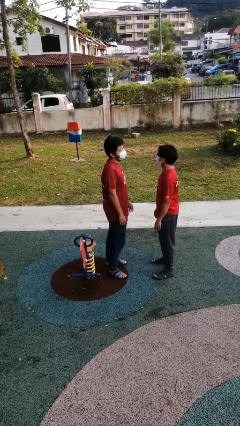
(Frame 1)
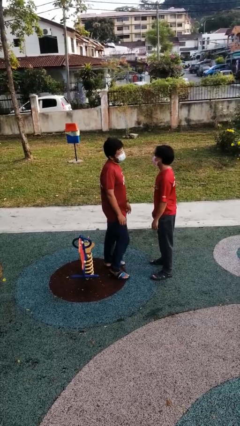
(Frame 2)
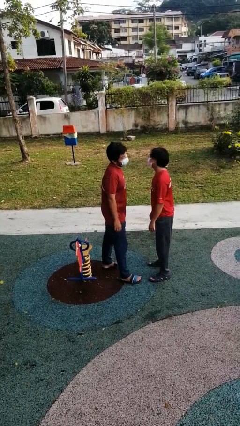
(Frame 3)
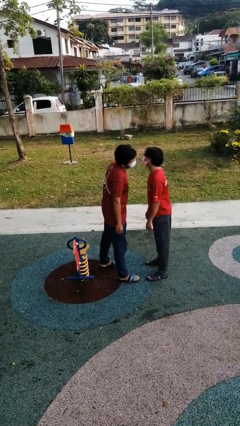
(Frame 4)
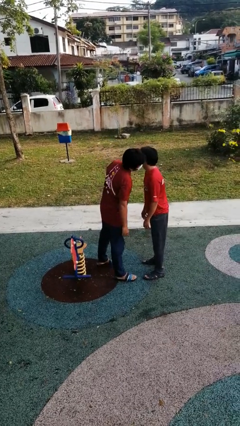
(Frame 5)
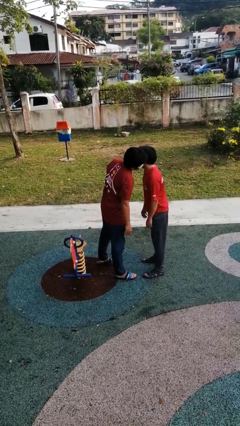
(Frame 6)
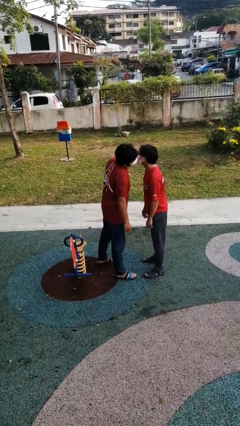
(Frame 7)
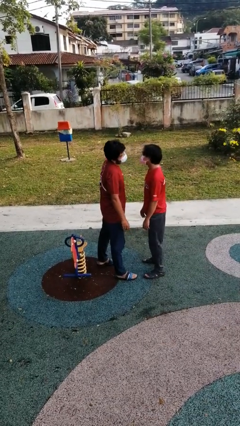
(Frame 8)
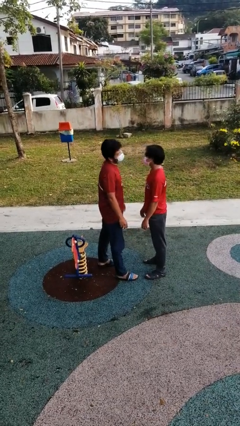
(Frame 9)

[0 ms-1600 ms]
person kisses cheek of person

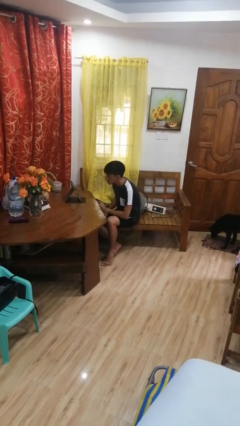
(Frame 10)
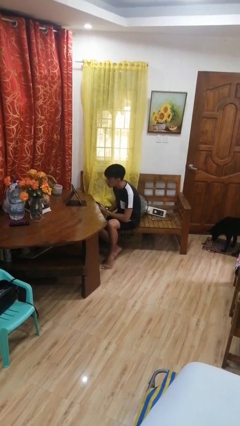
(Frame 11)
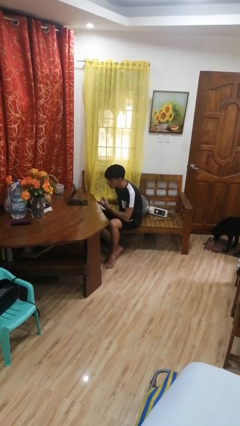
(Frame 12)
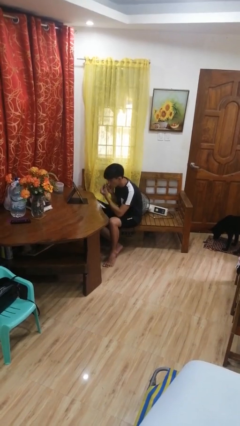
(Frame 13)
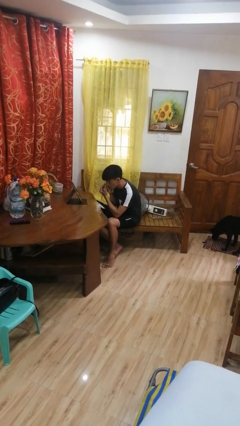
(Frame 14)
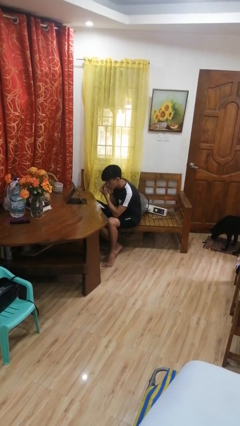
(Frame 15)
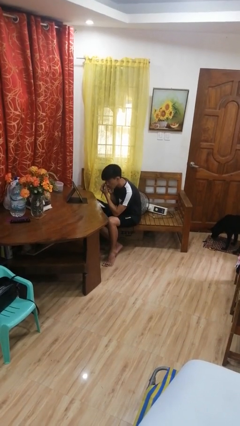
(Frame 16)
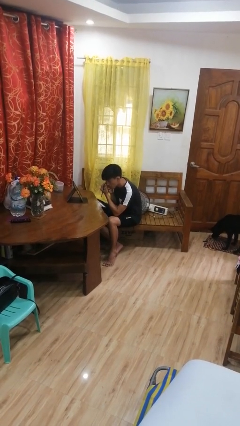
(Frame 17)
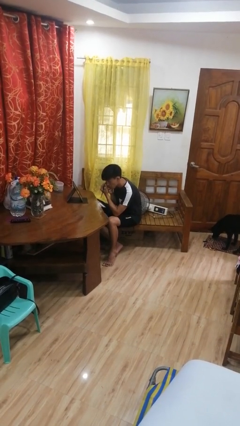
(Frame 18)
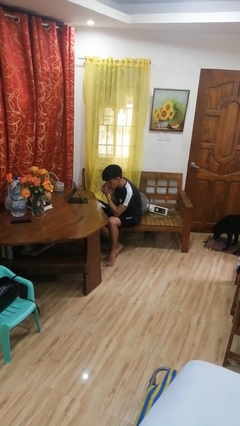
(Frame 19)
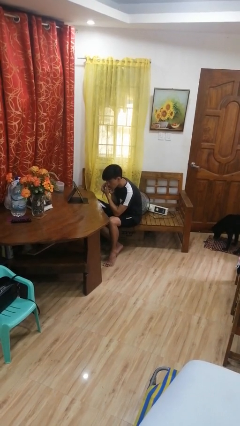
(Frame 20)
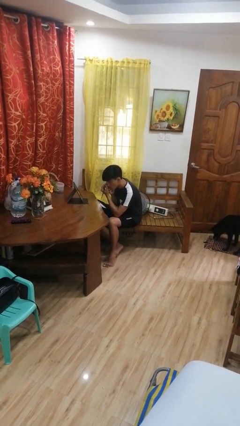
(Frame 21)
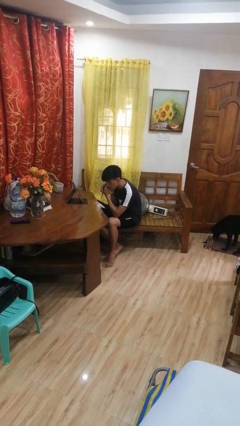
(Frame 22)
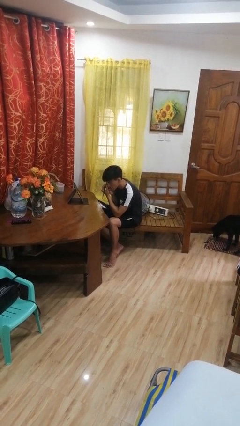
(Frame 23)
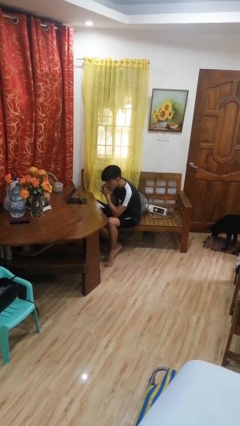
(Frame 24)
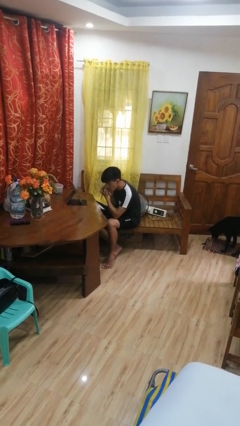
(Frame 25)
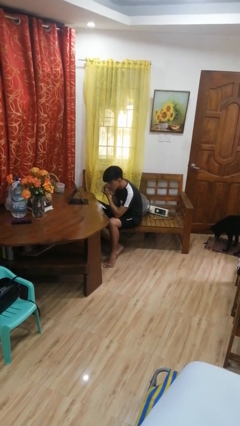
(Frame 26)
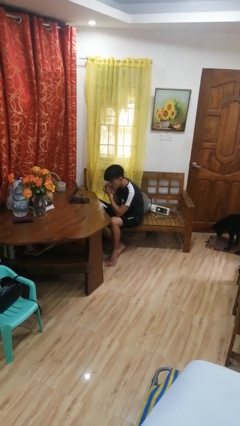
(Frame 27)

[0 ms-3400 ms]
person applies eye makeup

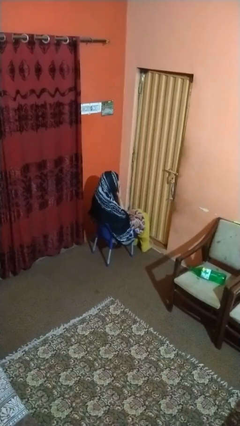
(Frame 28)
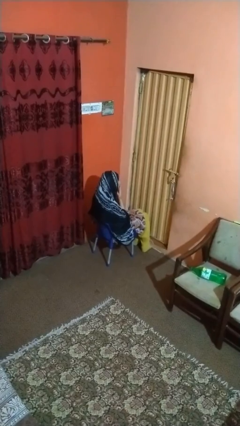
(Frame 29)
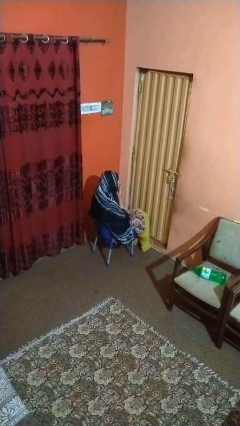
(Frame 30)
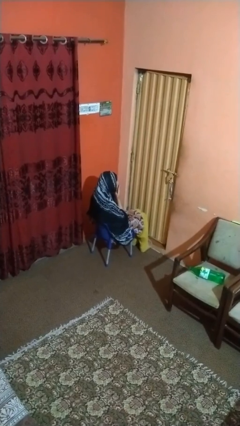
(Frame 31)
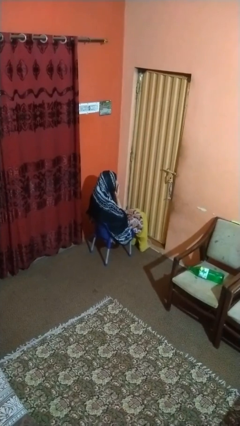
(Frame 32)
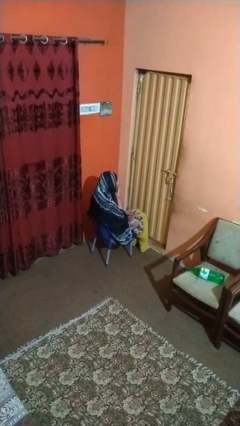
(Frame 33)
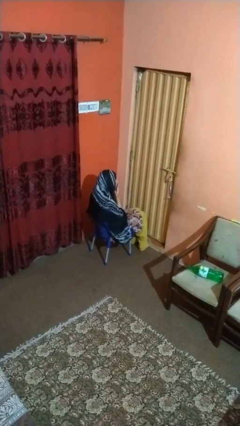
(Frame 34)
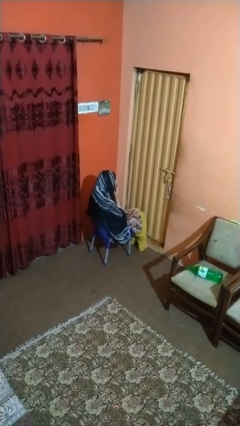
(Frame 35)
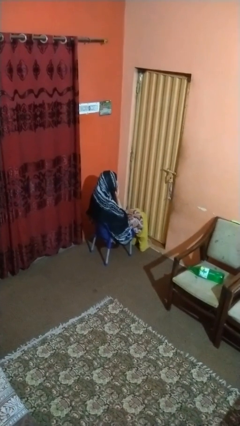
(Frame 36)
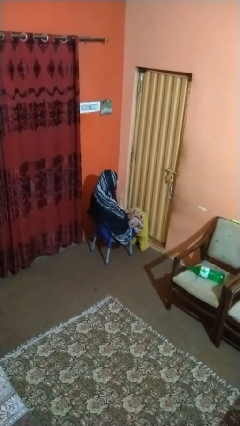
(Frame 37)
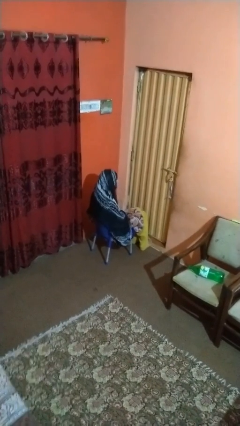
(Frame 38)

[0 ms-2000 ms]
person yawns

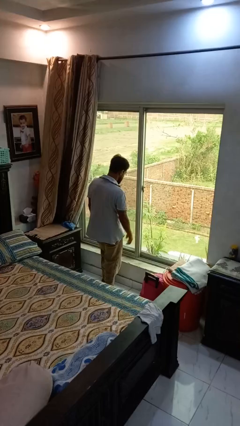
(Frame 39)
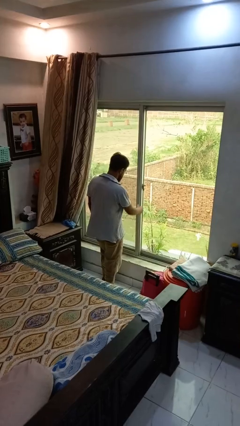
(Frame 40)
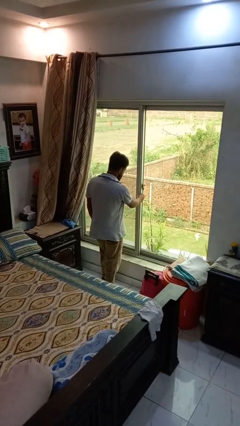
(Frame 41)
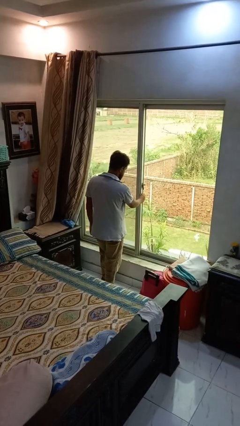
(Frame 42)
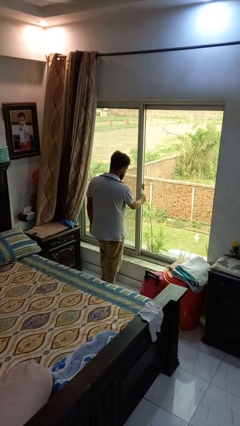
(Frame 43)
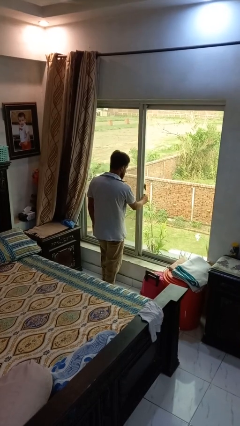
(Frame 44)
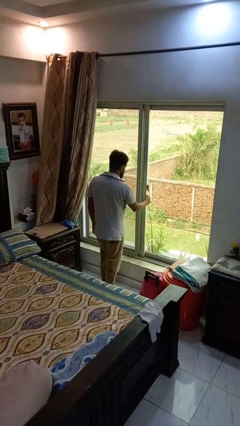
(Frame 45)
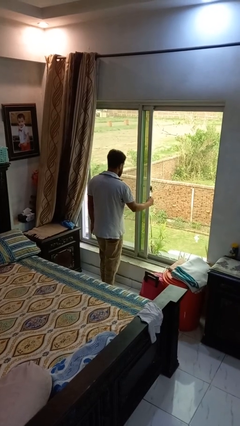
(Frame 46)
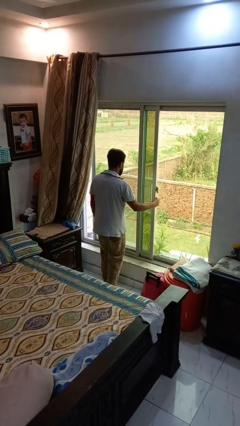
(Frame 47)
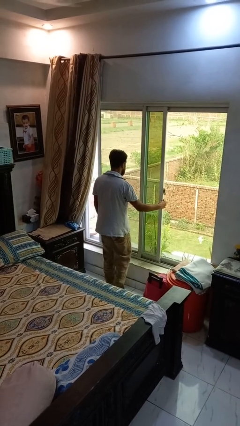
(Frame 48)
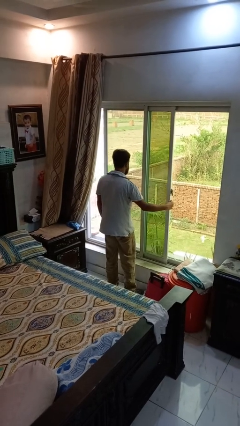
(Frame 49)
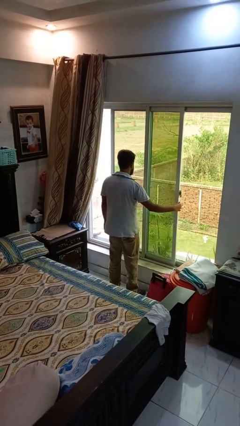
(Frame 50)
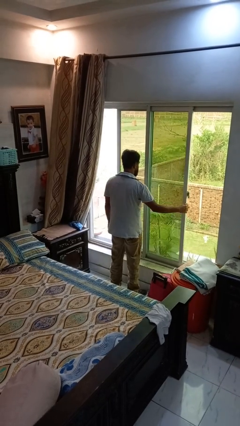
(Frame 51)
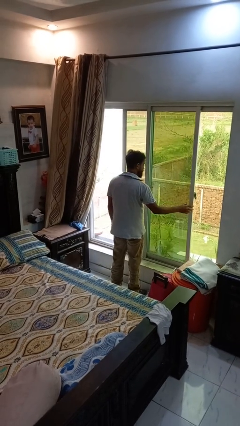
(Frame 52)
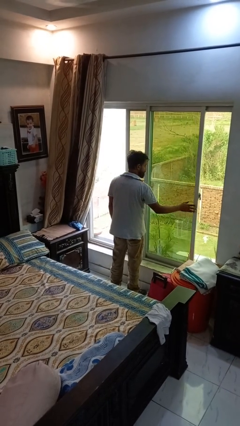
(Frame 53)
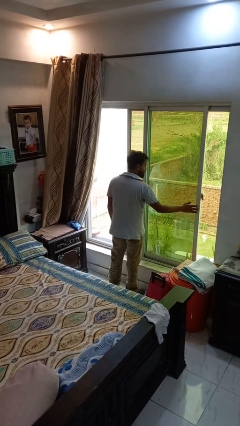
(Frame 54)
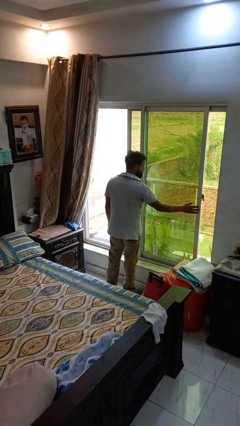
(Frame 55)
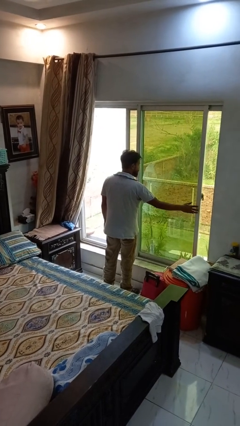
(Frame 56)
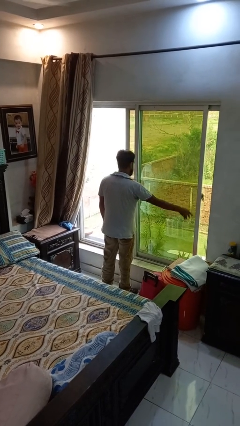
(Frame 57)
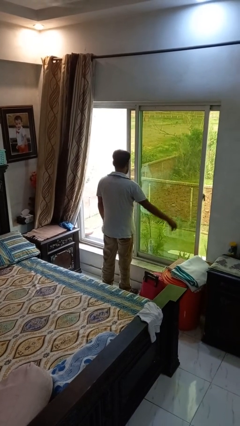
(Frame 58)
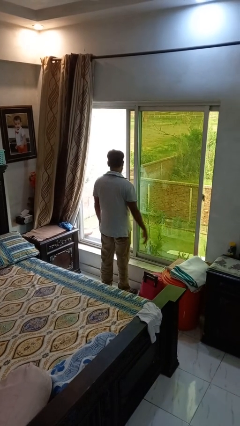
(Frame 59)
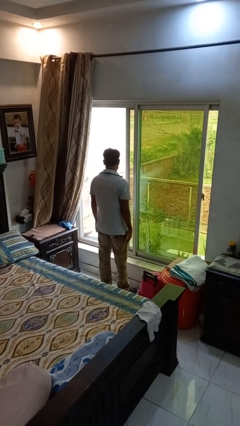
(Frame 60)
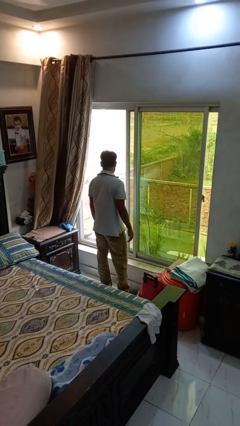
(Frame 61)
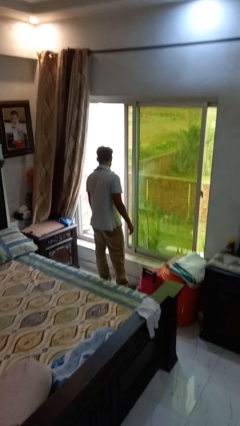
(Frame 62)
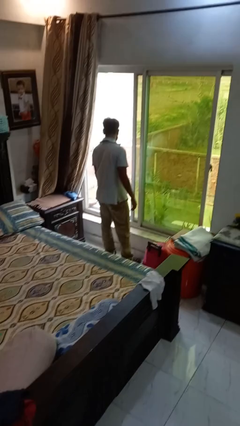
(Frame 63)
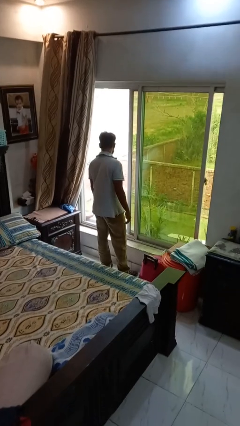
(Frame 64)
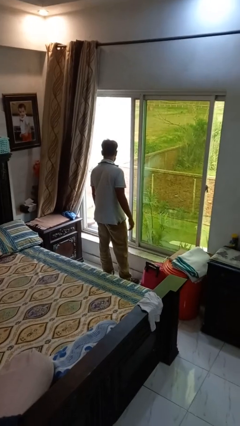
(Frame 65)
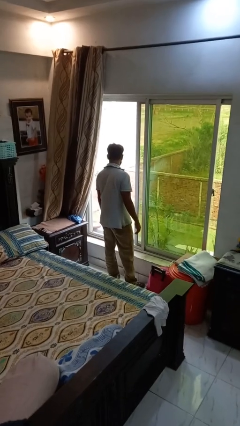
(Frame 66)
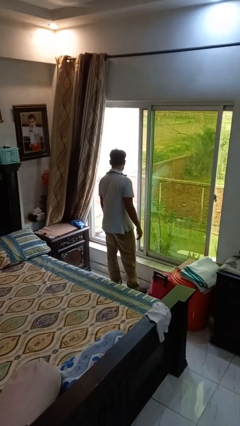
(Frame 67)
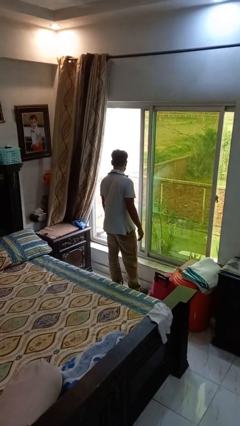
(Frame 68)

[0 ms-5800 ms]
person opens sliding door

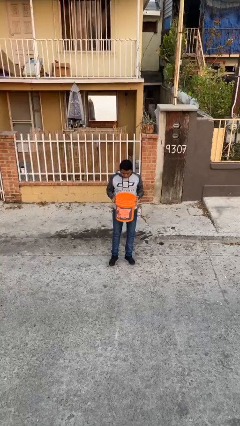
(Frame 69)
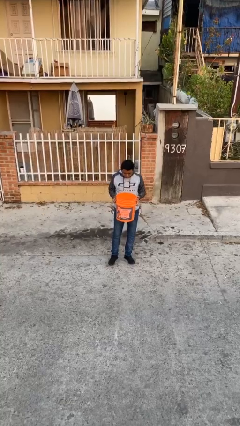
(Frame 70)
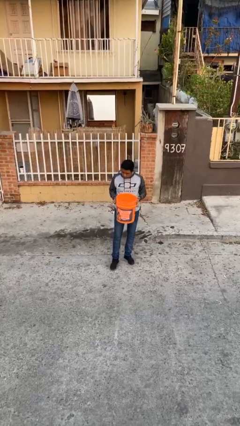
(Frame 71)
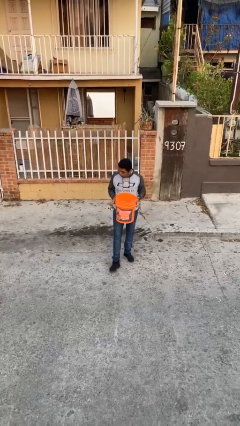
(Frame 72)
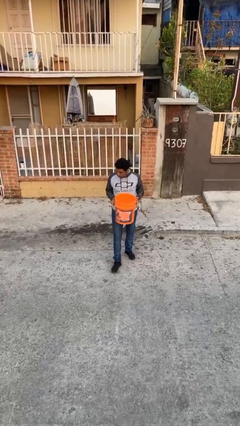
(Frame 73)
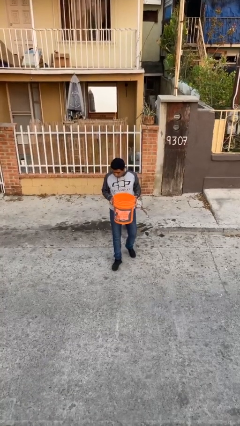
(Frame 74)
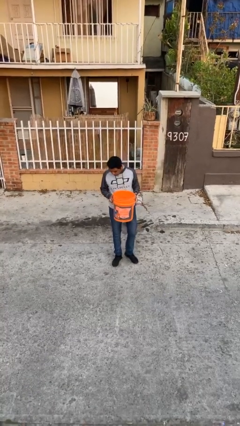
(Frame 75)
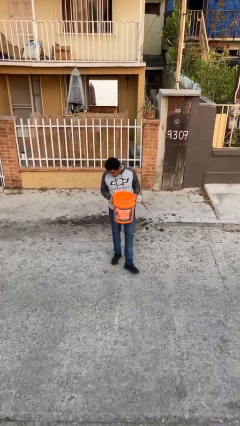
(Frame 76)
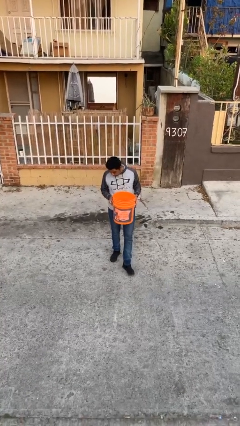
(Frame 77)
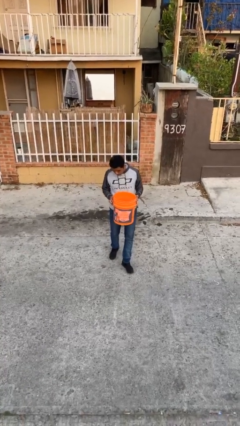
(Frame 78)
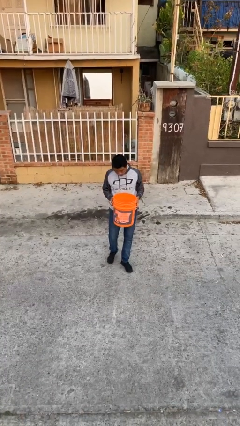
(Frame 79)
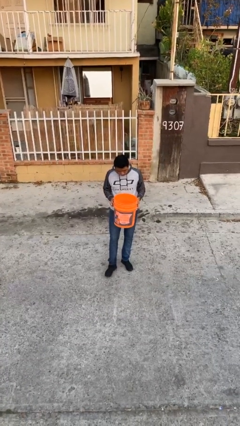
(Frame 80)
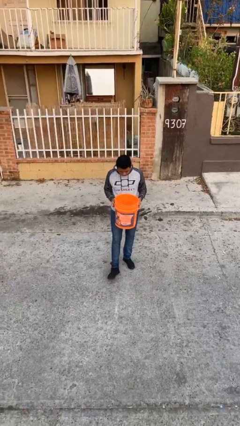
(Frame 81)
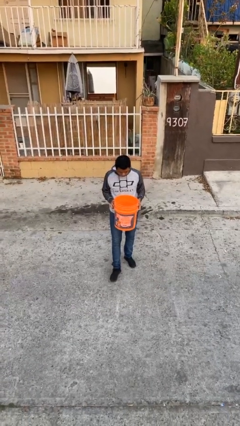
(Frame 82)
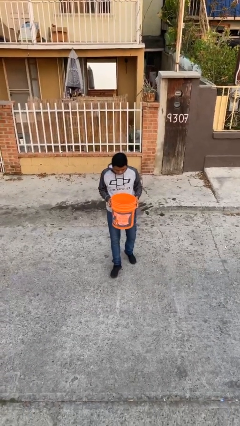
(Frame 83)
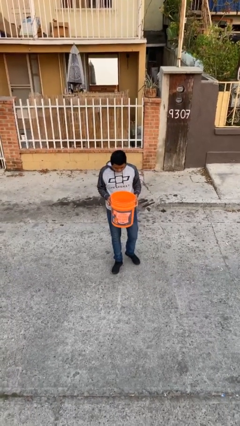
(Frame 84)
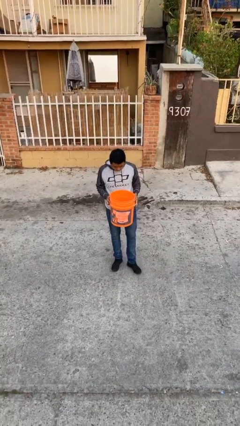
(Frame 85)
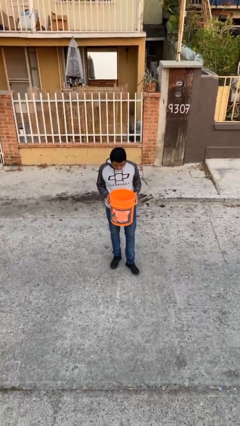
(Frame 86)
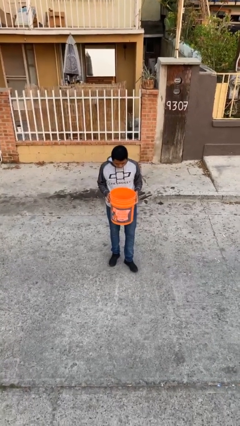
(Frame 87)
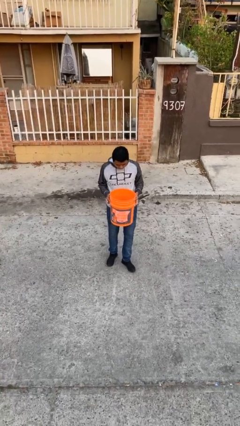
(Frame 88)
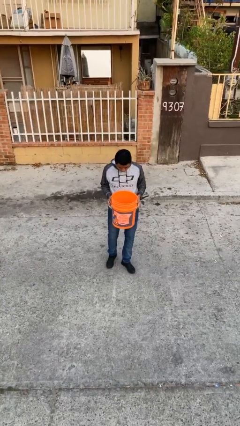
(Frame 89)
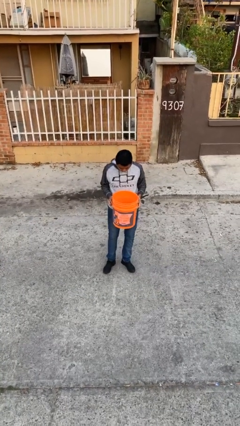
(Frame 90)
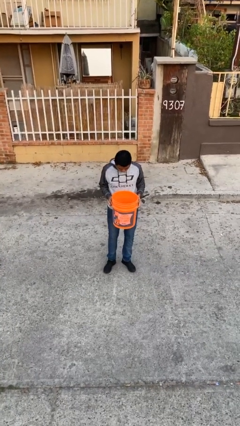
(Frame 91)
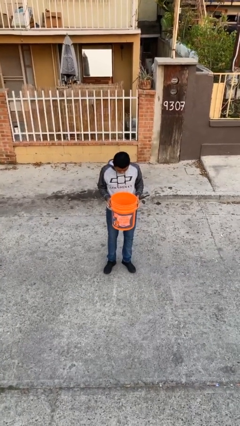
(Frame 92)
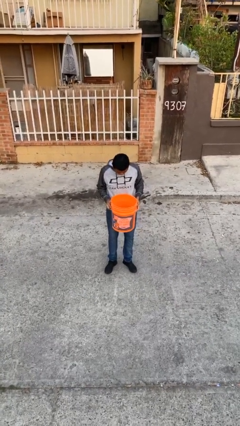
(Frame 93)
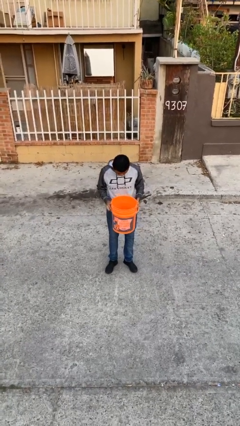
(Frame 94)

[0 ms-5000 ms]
person carries heavy object
